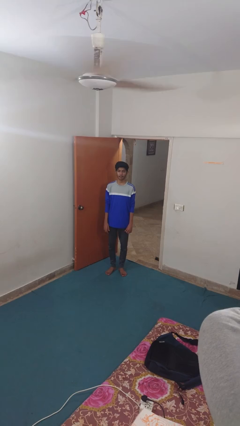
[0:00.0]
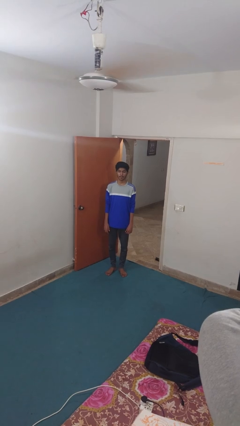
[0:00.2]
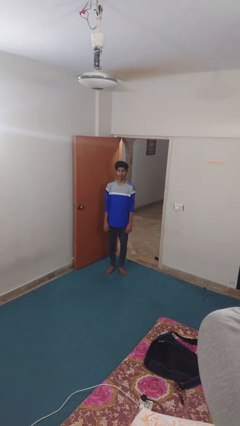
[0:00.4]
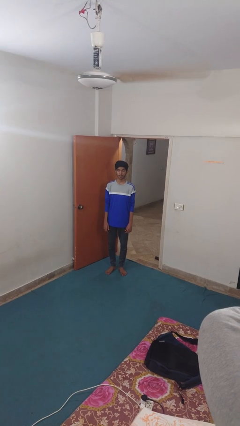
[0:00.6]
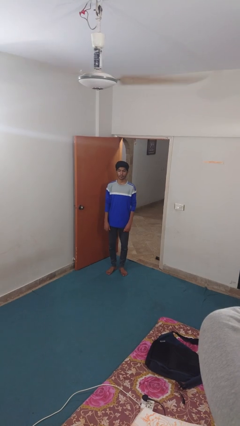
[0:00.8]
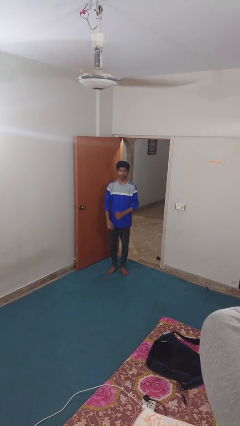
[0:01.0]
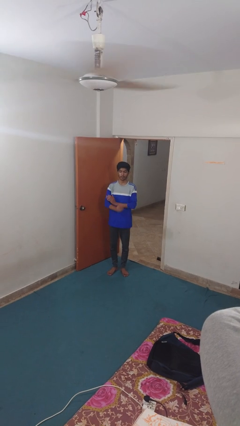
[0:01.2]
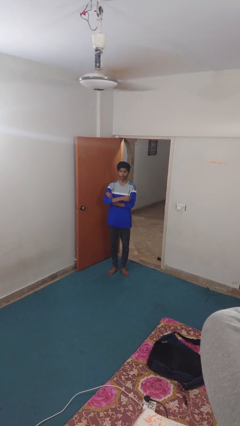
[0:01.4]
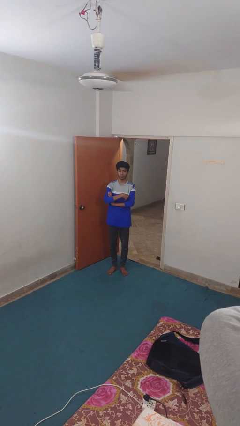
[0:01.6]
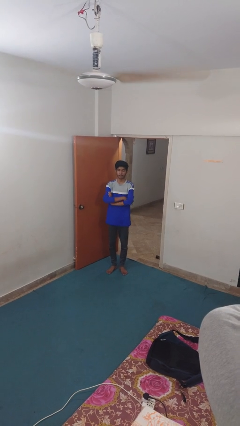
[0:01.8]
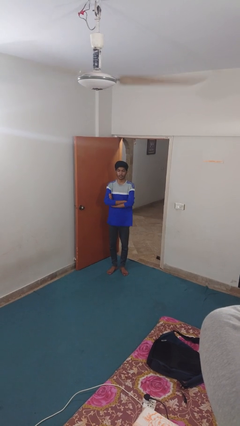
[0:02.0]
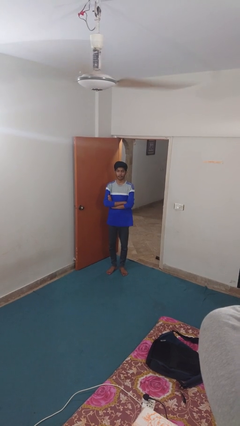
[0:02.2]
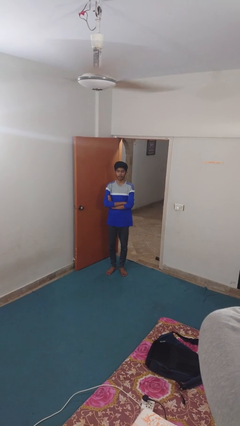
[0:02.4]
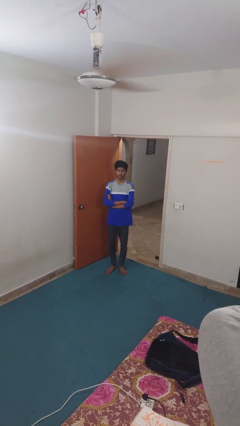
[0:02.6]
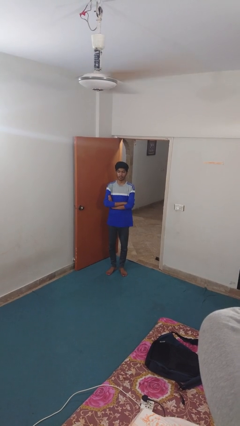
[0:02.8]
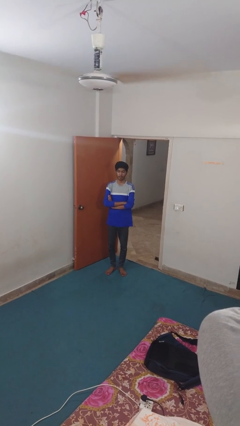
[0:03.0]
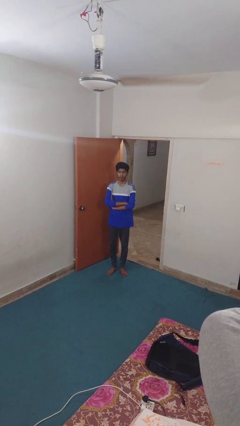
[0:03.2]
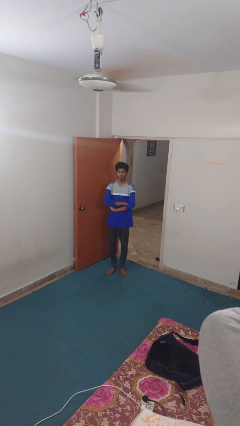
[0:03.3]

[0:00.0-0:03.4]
person crosses arms

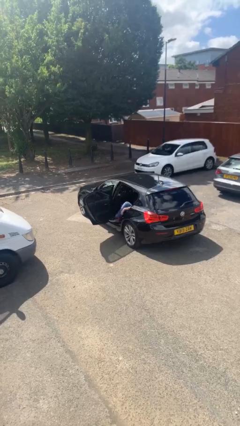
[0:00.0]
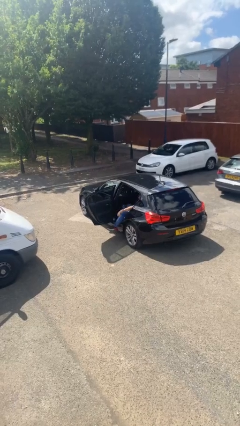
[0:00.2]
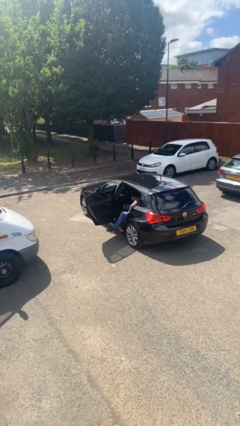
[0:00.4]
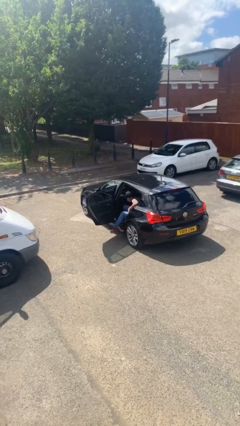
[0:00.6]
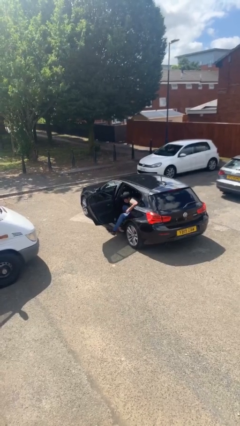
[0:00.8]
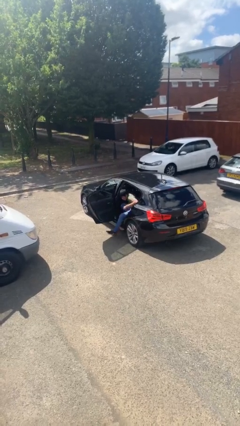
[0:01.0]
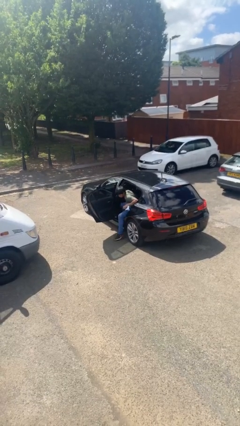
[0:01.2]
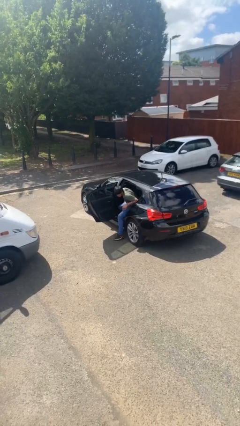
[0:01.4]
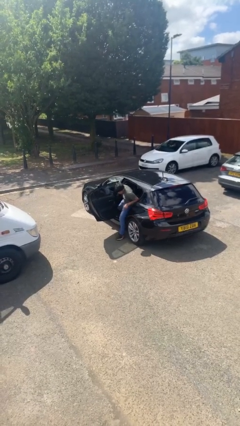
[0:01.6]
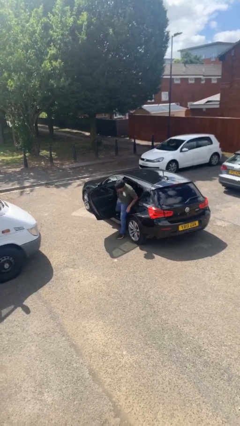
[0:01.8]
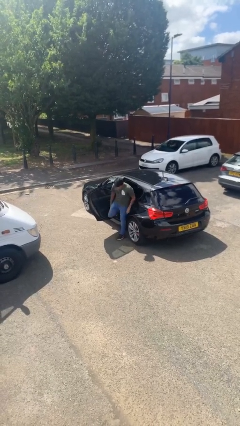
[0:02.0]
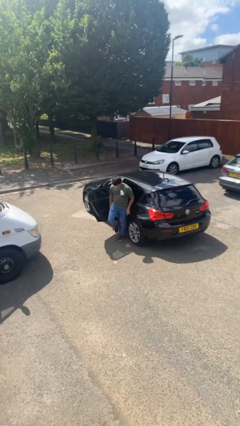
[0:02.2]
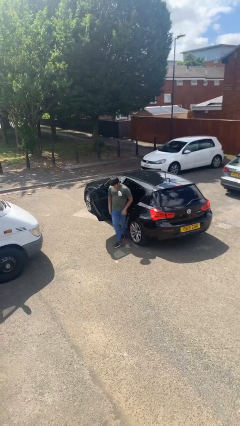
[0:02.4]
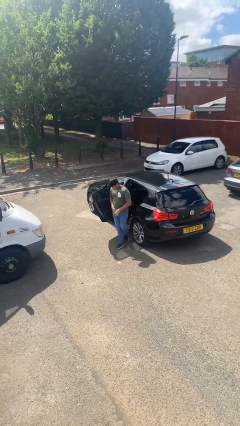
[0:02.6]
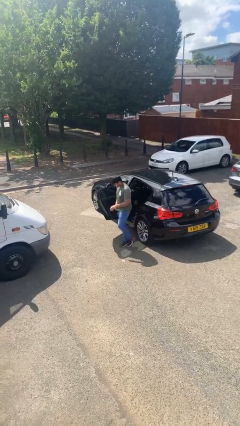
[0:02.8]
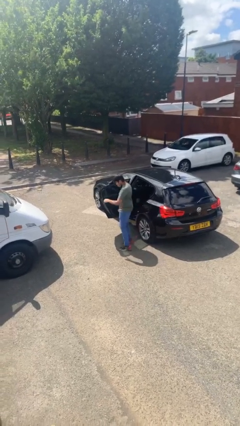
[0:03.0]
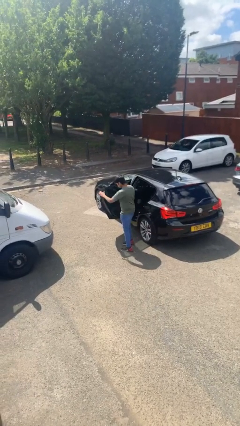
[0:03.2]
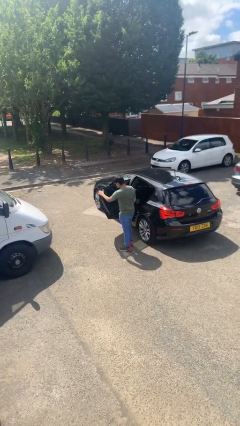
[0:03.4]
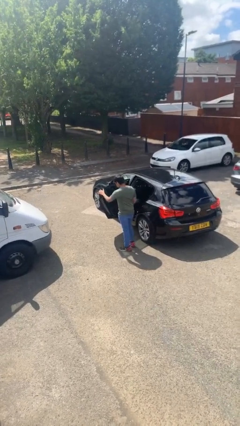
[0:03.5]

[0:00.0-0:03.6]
person exits car

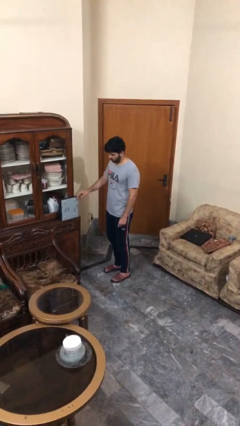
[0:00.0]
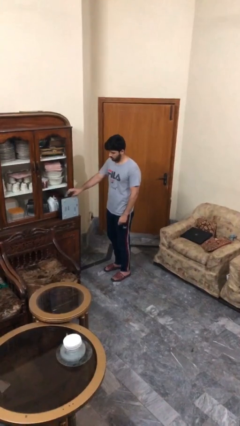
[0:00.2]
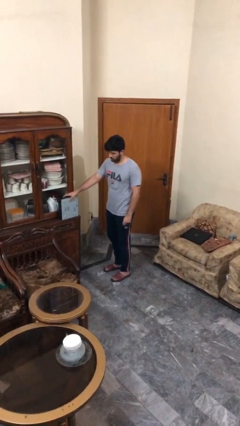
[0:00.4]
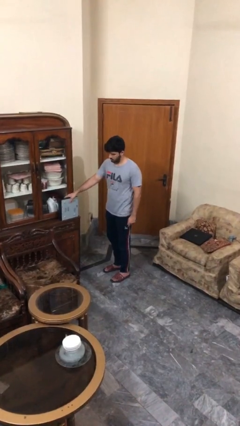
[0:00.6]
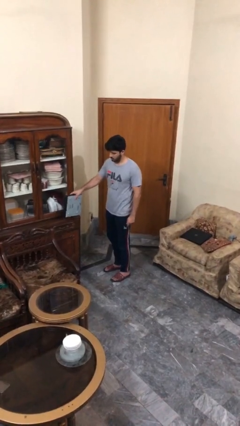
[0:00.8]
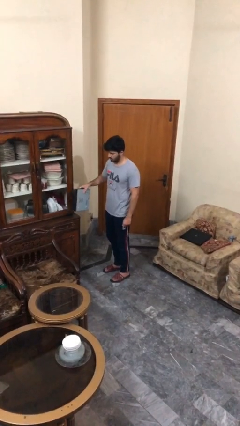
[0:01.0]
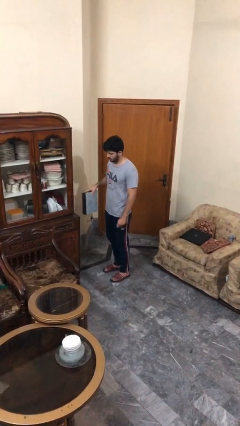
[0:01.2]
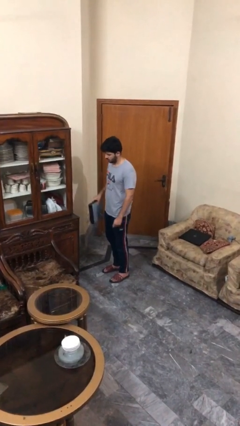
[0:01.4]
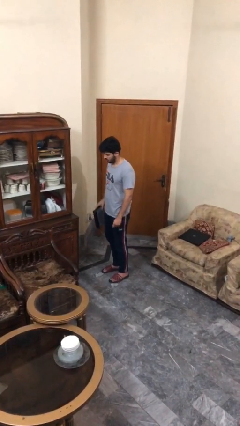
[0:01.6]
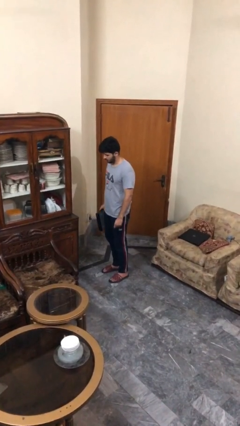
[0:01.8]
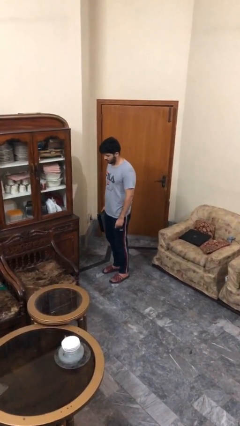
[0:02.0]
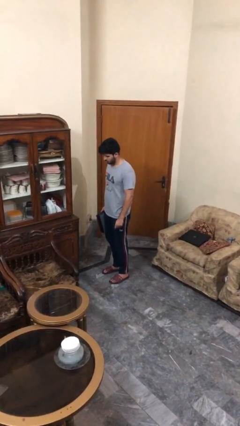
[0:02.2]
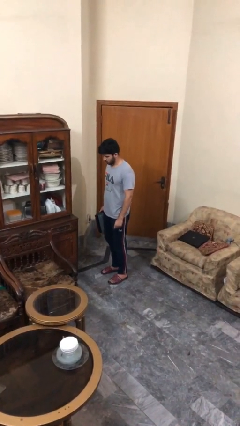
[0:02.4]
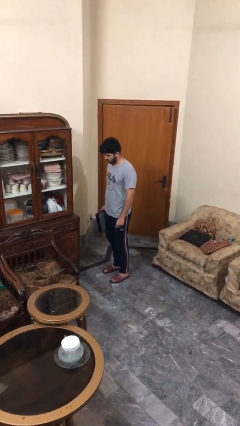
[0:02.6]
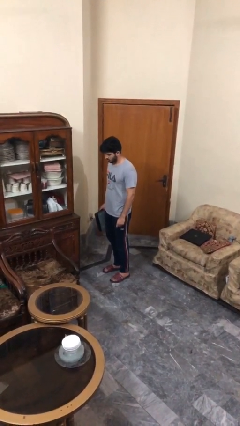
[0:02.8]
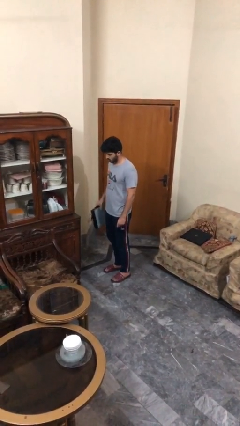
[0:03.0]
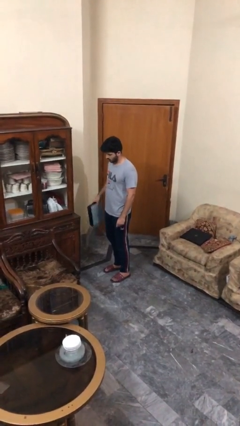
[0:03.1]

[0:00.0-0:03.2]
person picks up object from countertop

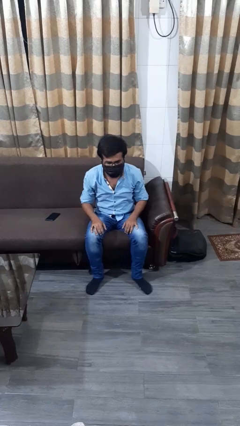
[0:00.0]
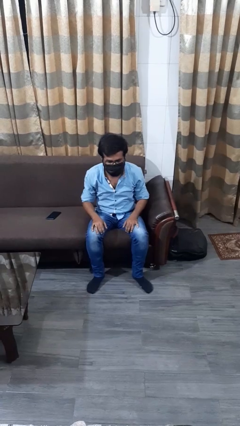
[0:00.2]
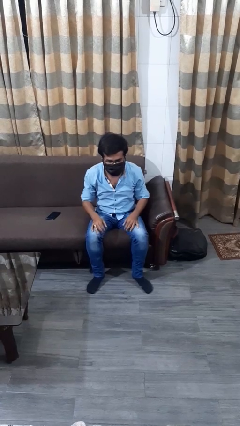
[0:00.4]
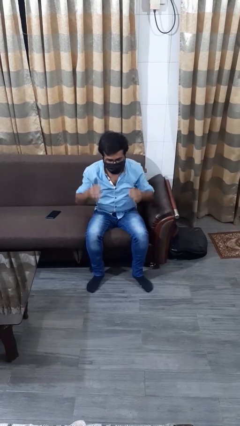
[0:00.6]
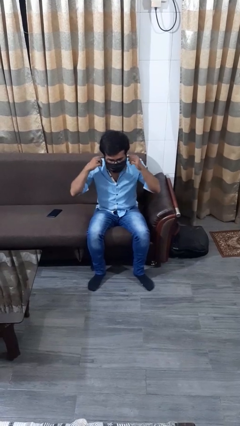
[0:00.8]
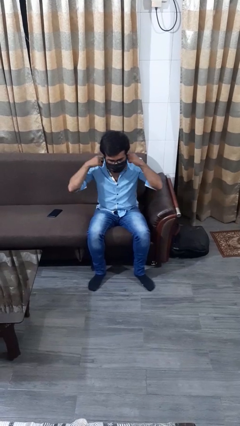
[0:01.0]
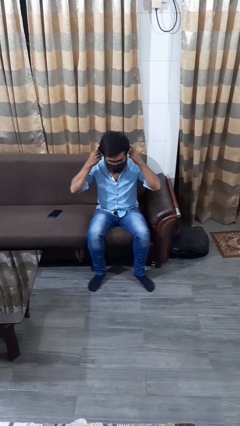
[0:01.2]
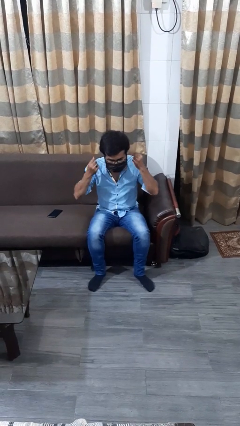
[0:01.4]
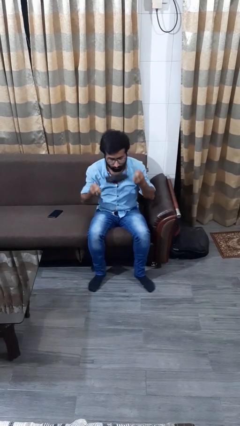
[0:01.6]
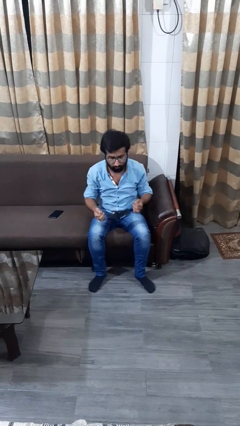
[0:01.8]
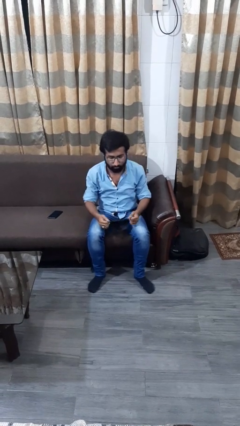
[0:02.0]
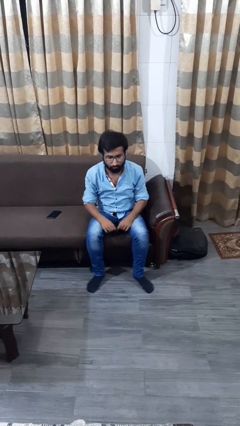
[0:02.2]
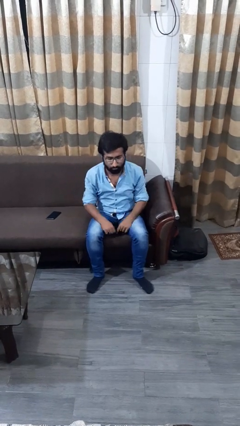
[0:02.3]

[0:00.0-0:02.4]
person takes off facemask

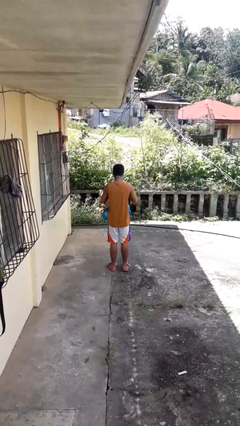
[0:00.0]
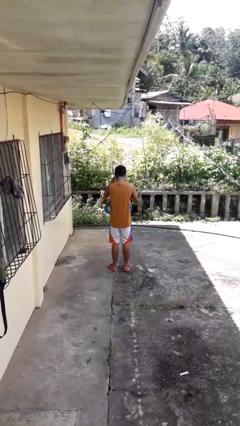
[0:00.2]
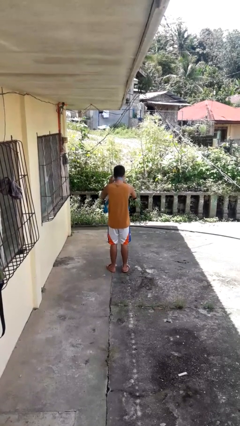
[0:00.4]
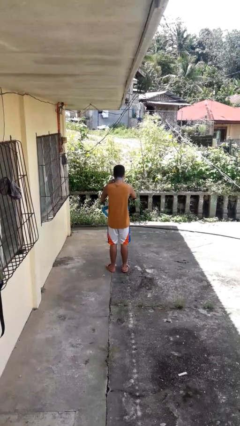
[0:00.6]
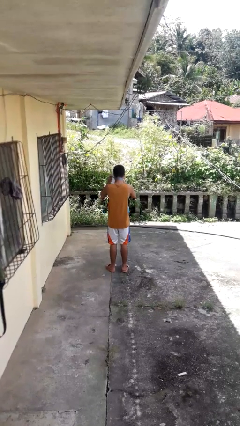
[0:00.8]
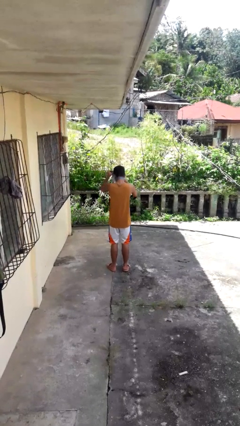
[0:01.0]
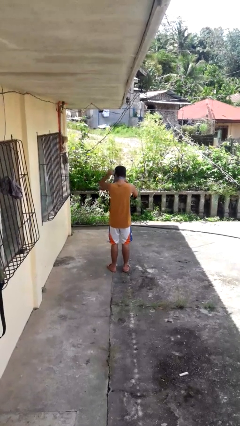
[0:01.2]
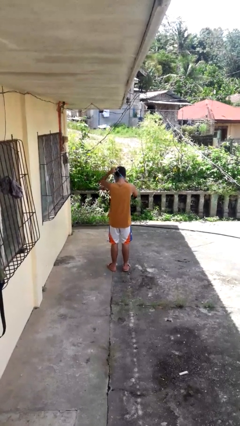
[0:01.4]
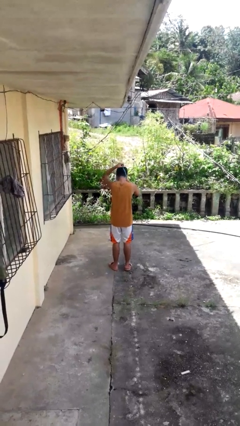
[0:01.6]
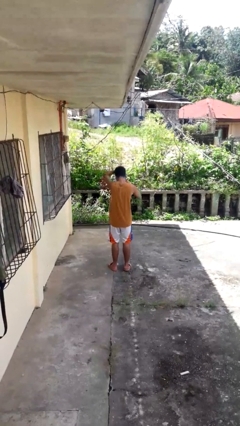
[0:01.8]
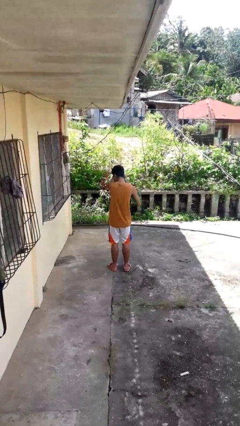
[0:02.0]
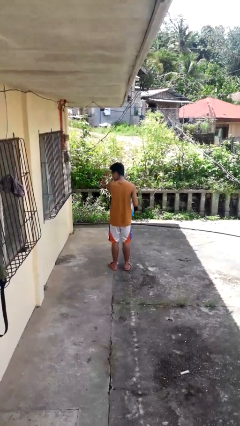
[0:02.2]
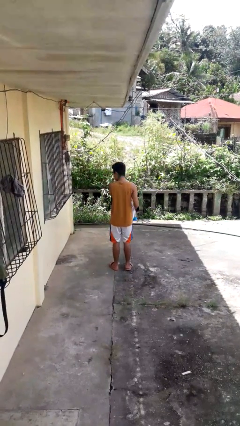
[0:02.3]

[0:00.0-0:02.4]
person takes off apron

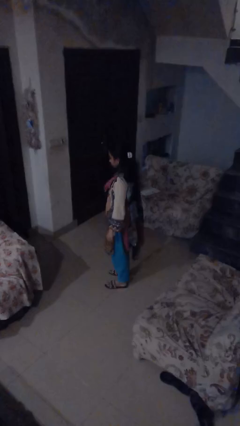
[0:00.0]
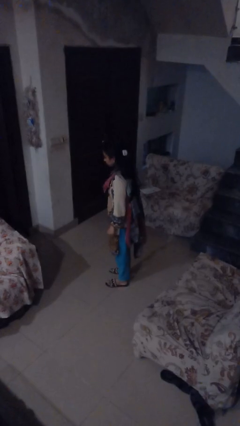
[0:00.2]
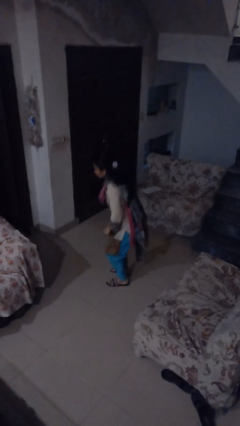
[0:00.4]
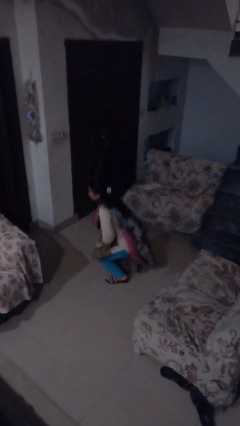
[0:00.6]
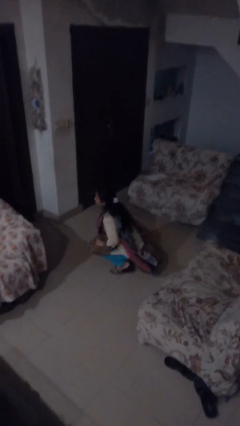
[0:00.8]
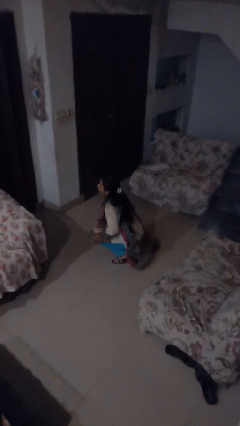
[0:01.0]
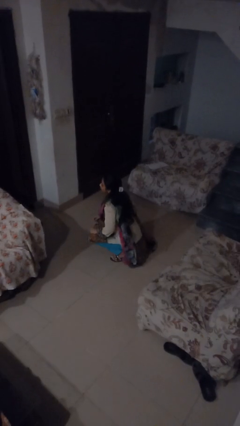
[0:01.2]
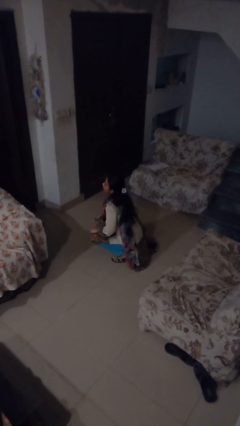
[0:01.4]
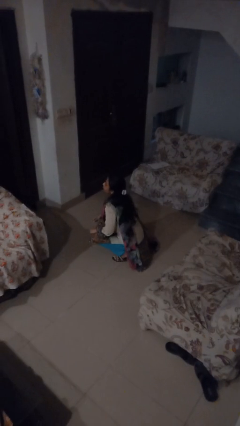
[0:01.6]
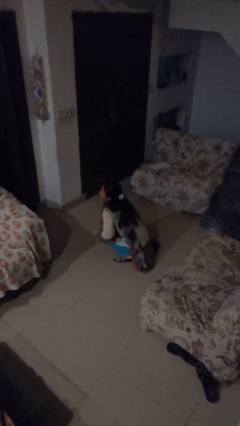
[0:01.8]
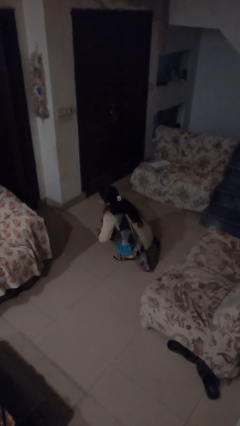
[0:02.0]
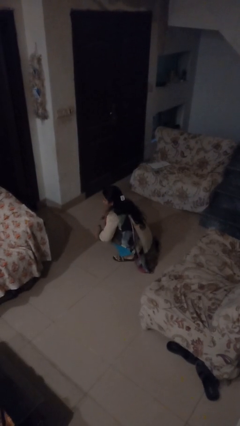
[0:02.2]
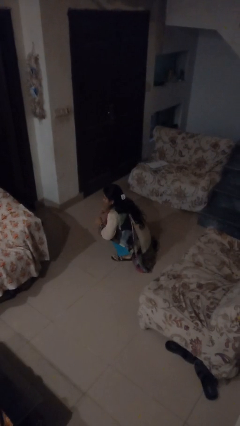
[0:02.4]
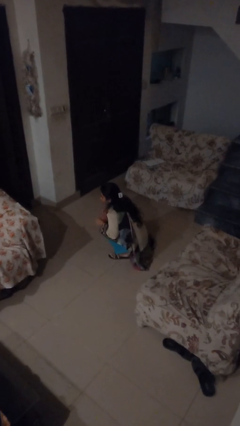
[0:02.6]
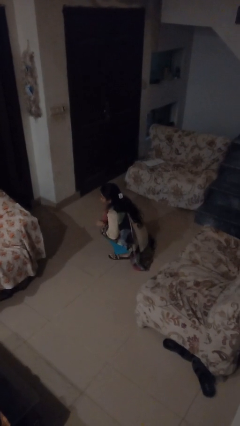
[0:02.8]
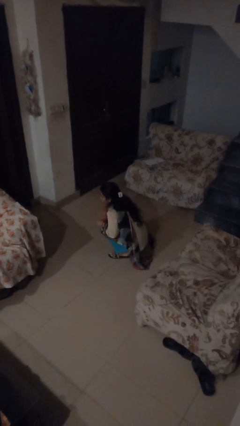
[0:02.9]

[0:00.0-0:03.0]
person squats
